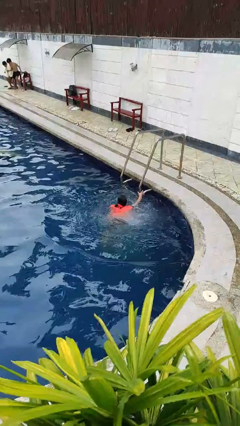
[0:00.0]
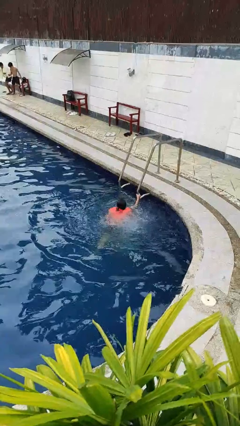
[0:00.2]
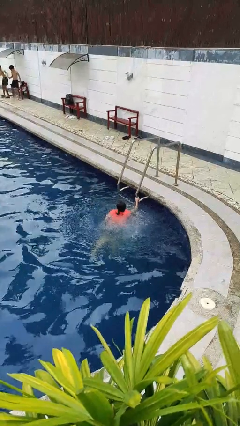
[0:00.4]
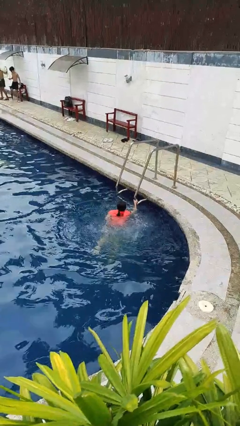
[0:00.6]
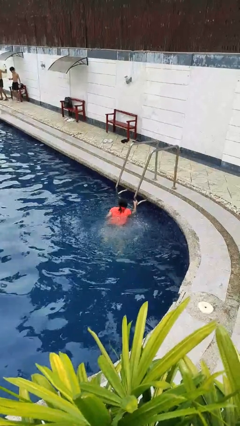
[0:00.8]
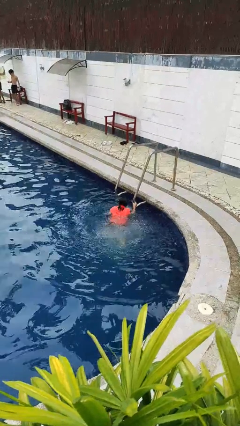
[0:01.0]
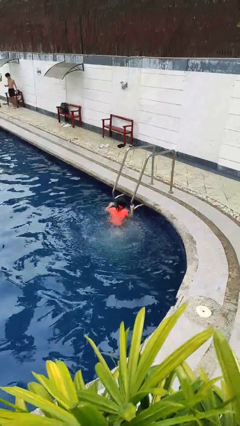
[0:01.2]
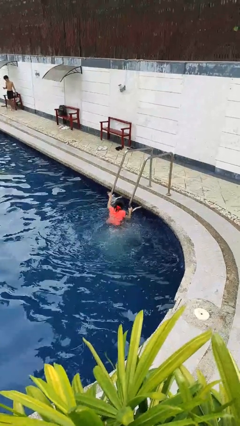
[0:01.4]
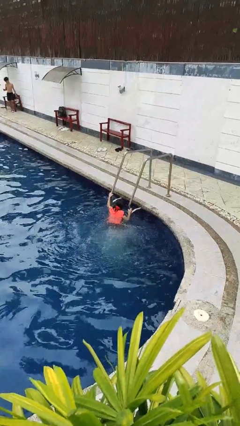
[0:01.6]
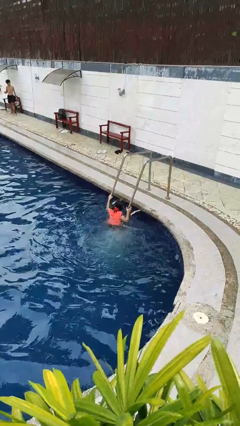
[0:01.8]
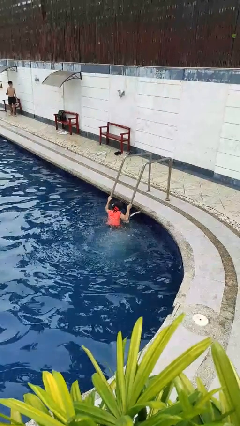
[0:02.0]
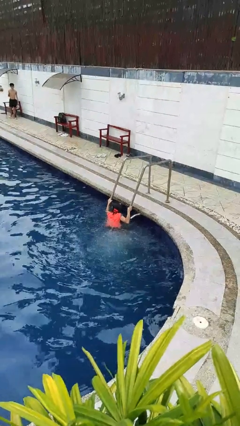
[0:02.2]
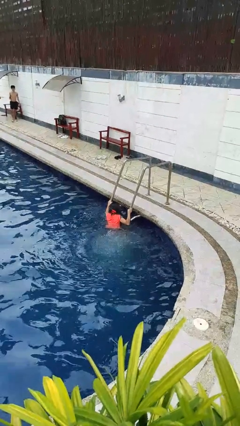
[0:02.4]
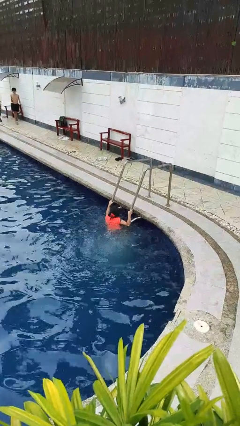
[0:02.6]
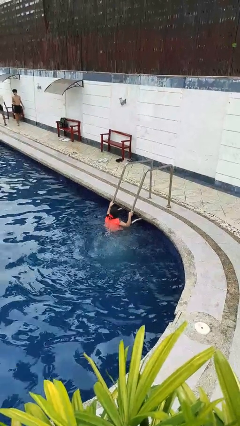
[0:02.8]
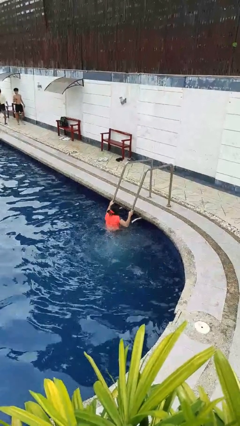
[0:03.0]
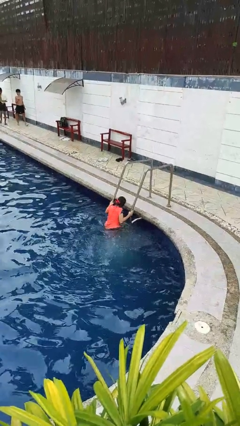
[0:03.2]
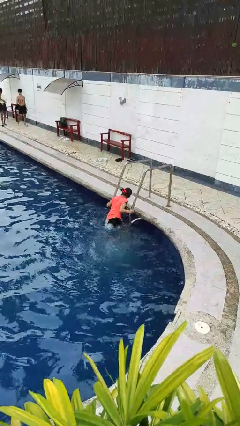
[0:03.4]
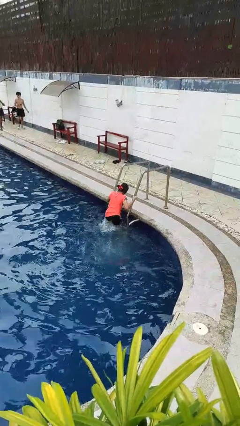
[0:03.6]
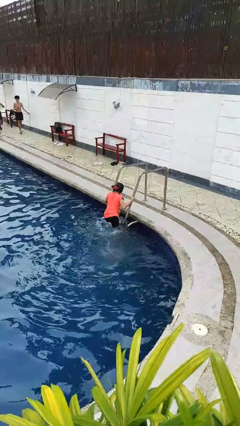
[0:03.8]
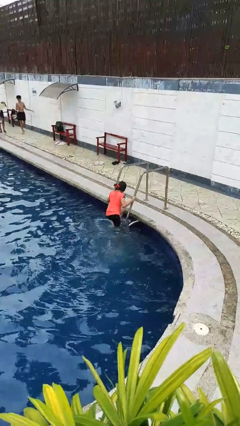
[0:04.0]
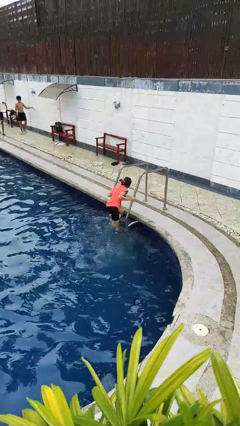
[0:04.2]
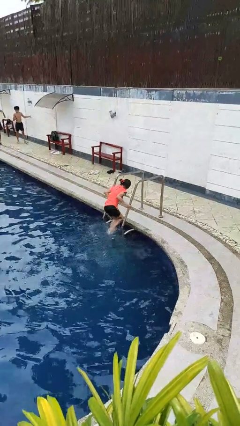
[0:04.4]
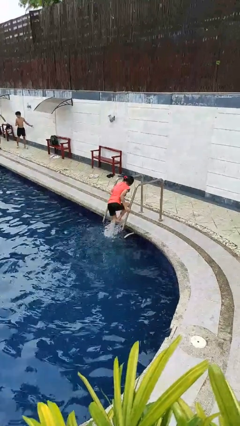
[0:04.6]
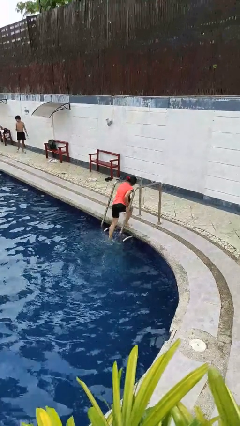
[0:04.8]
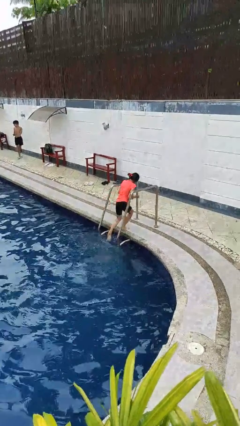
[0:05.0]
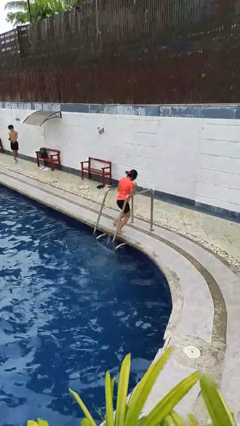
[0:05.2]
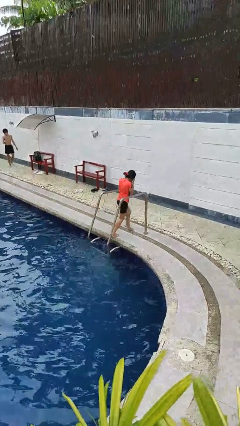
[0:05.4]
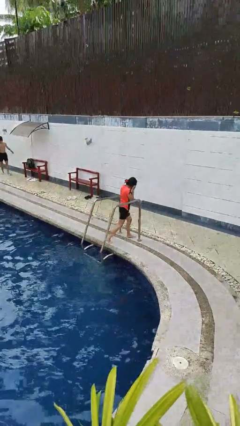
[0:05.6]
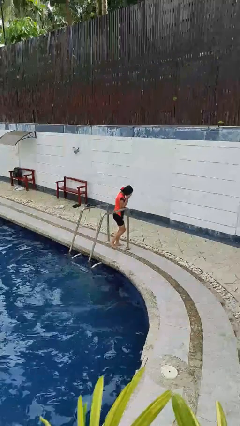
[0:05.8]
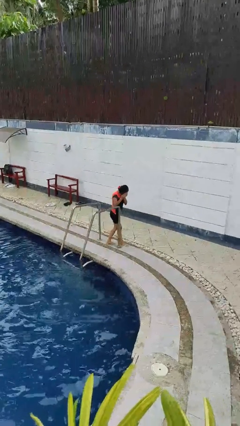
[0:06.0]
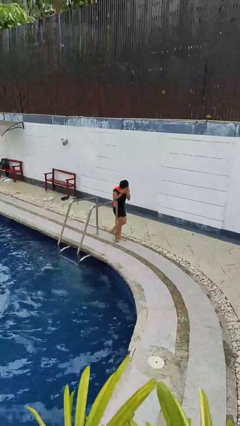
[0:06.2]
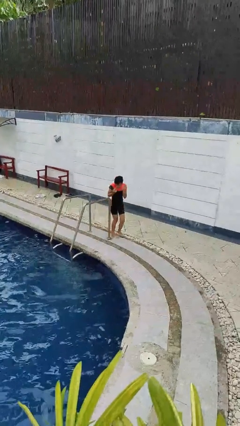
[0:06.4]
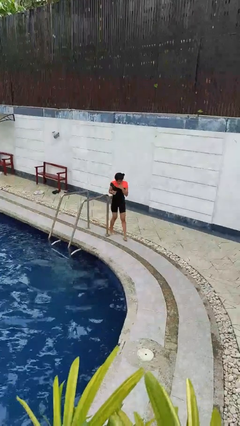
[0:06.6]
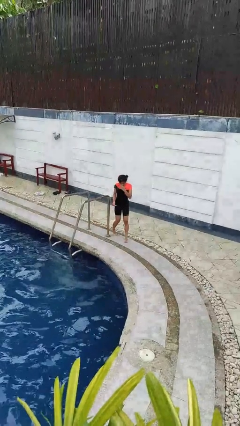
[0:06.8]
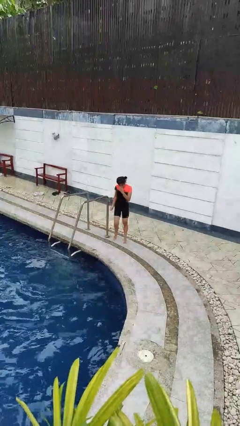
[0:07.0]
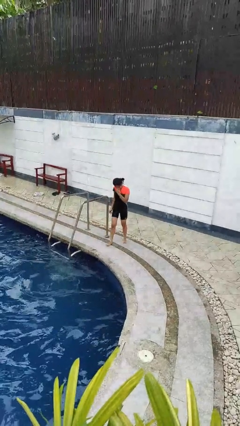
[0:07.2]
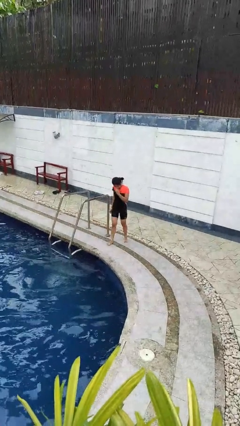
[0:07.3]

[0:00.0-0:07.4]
person exits pool

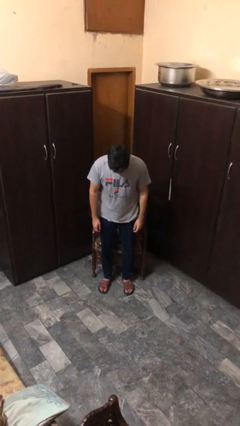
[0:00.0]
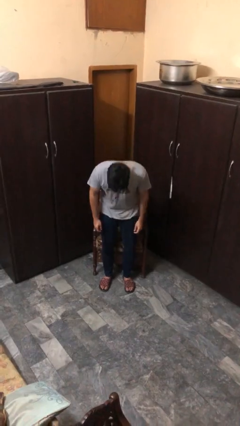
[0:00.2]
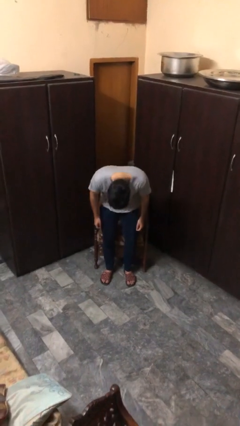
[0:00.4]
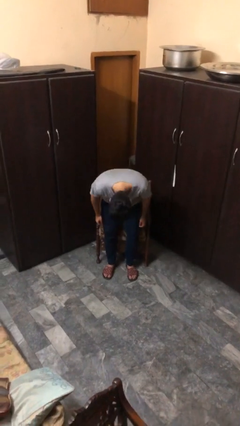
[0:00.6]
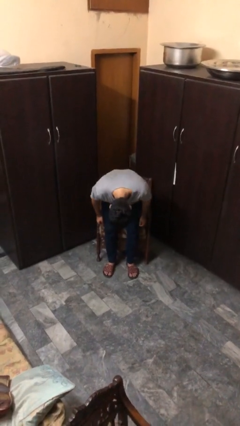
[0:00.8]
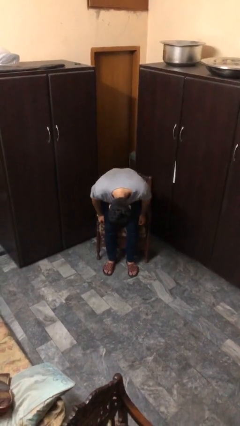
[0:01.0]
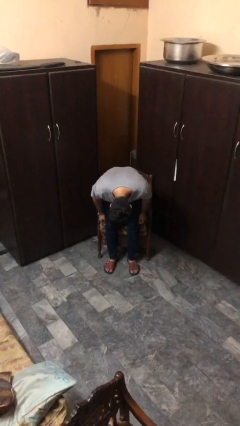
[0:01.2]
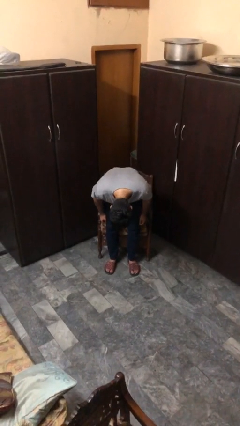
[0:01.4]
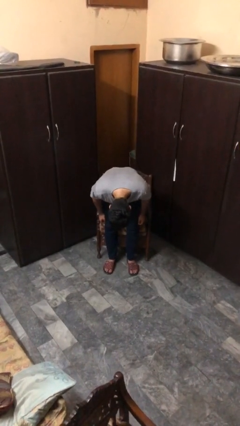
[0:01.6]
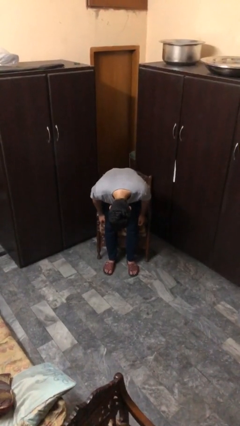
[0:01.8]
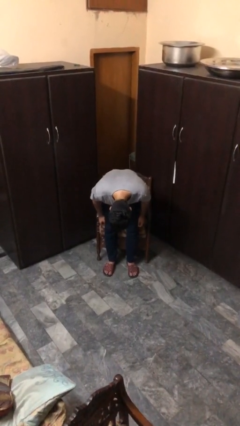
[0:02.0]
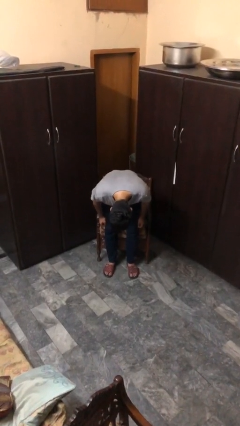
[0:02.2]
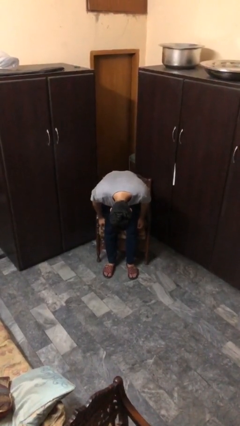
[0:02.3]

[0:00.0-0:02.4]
person bows

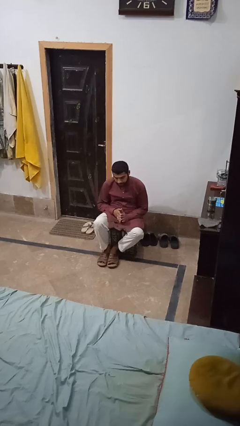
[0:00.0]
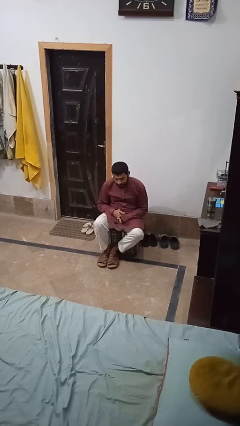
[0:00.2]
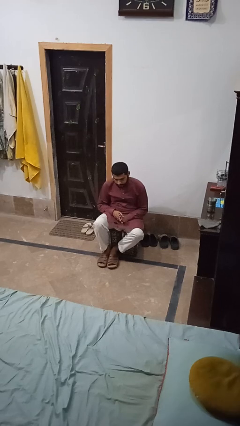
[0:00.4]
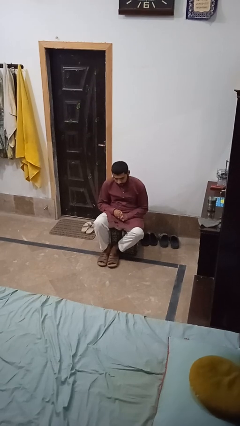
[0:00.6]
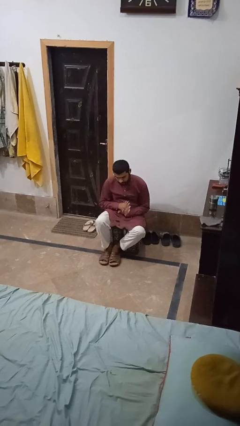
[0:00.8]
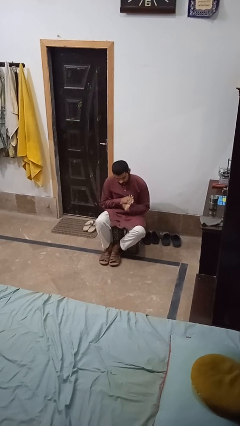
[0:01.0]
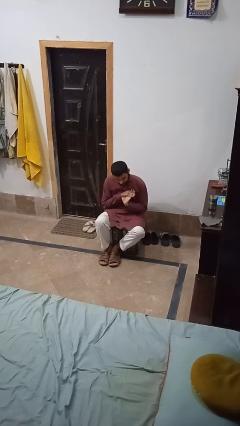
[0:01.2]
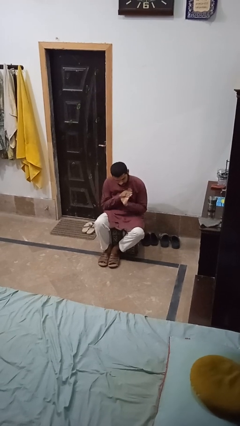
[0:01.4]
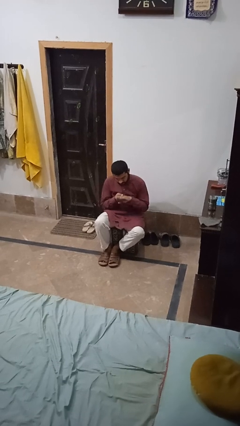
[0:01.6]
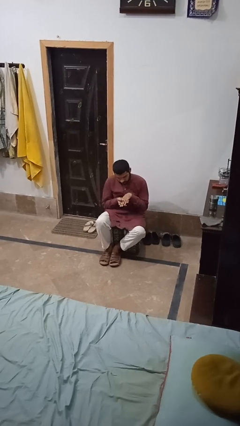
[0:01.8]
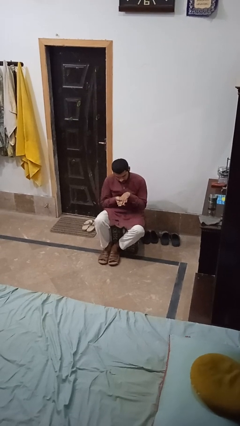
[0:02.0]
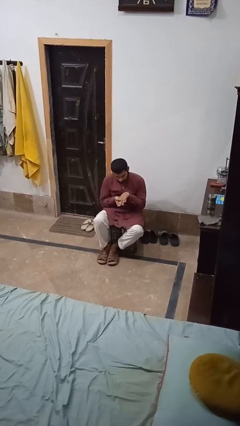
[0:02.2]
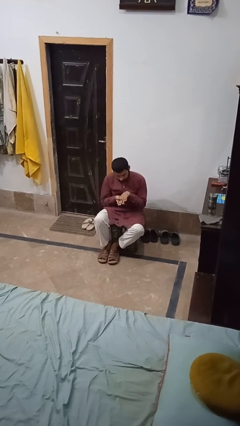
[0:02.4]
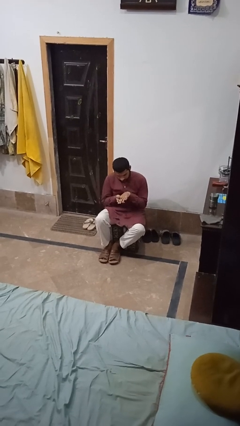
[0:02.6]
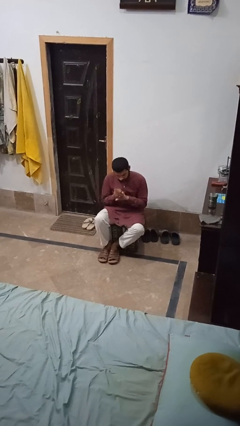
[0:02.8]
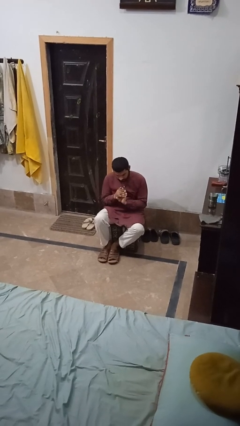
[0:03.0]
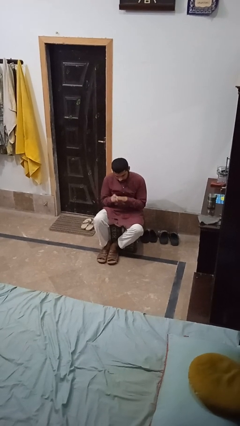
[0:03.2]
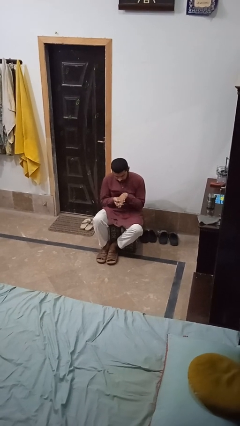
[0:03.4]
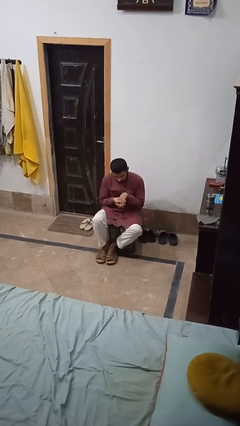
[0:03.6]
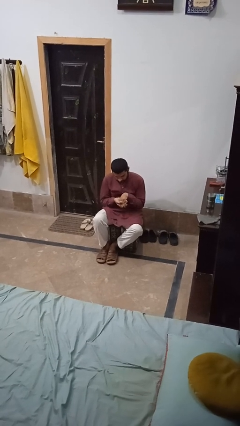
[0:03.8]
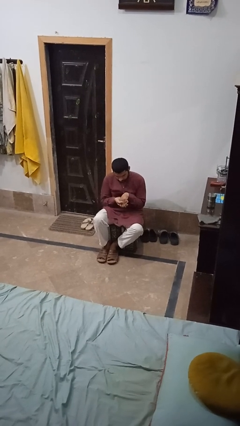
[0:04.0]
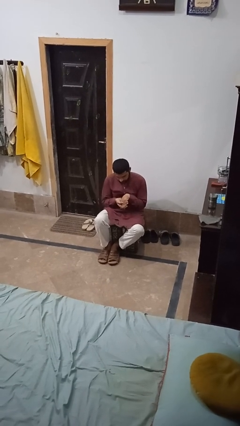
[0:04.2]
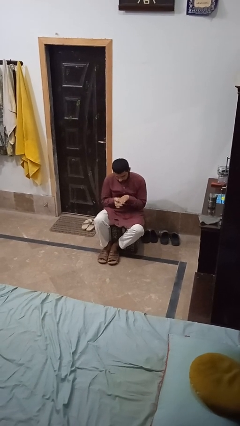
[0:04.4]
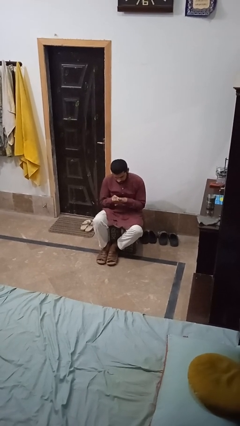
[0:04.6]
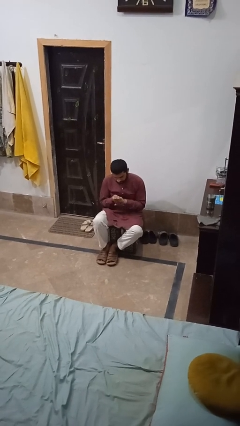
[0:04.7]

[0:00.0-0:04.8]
person looks at hands in lap

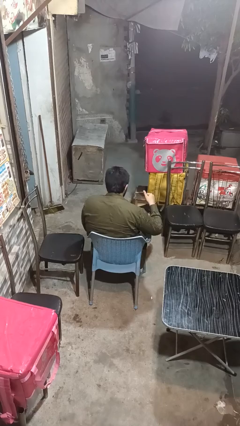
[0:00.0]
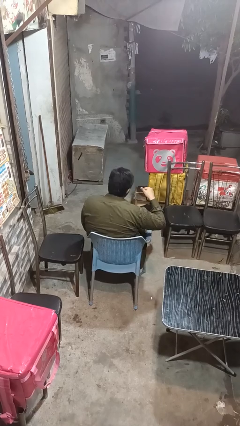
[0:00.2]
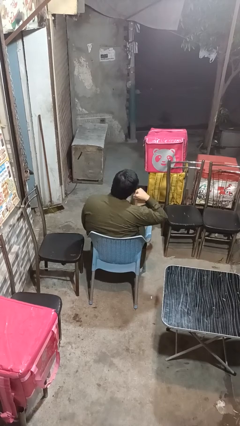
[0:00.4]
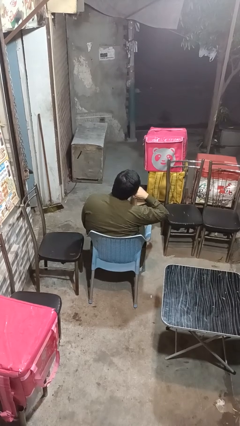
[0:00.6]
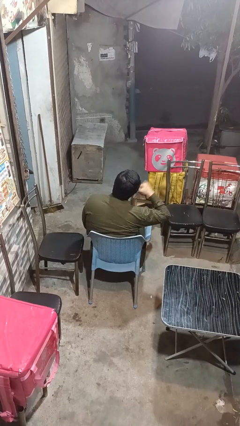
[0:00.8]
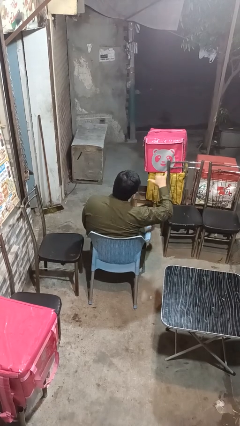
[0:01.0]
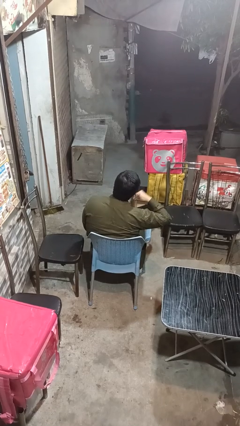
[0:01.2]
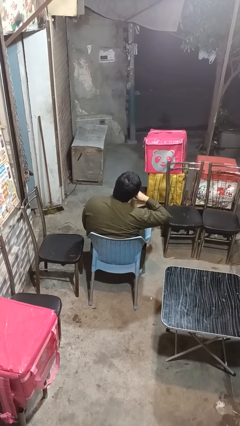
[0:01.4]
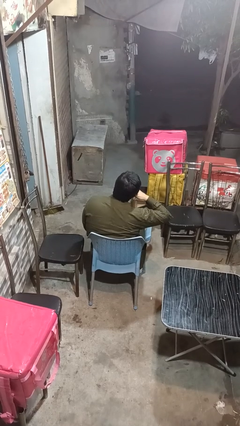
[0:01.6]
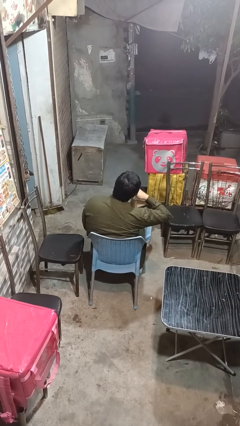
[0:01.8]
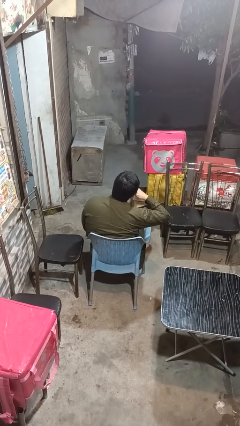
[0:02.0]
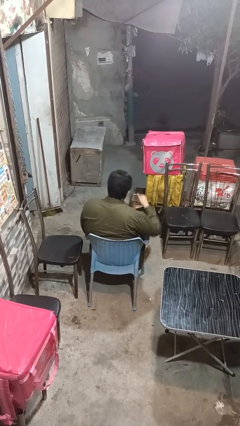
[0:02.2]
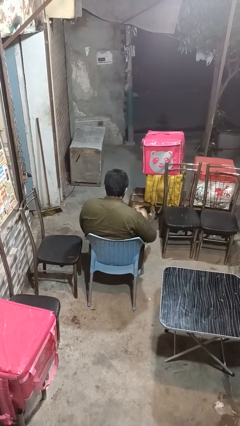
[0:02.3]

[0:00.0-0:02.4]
person gestures call me

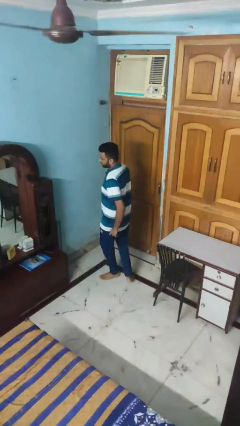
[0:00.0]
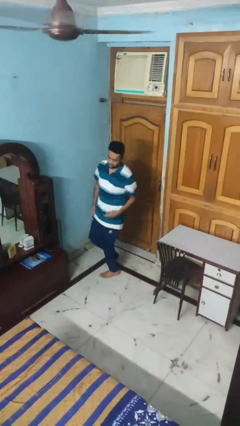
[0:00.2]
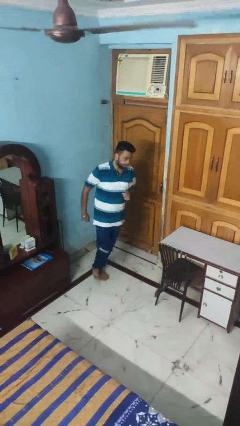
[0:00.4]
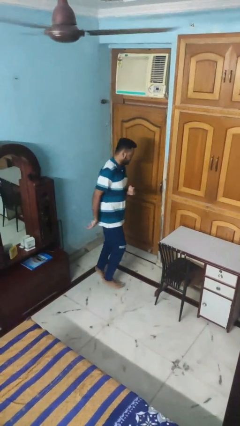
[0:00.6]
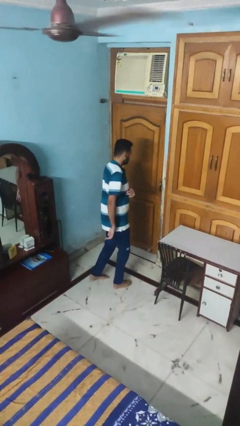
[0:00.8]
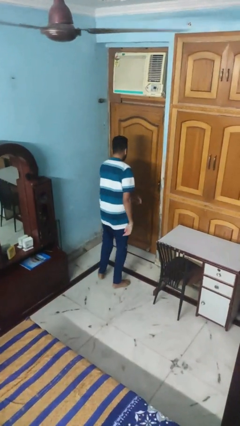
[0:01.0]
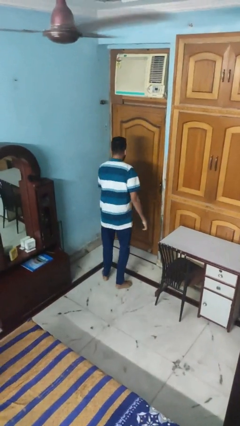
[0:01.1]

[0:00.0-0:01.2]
person twirls
